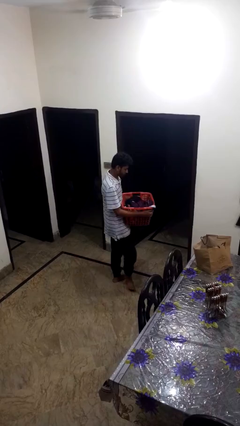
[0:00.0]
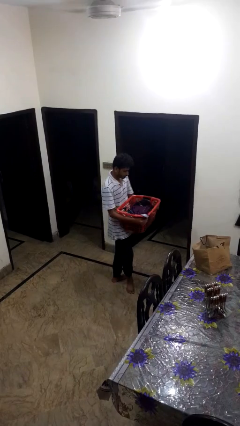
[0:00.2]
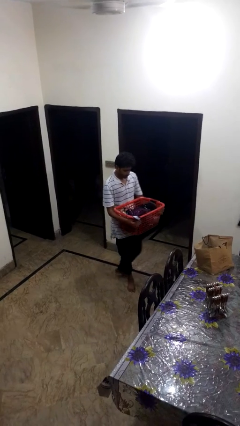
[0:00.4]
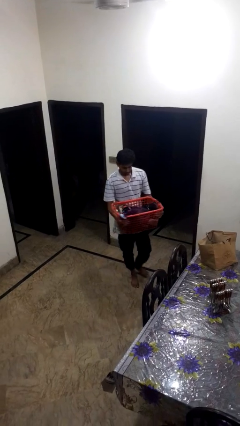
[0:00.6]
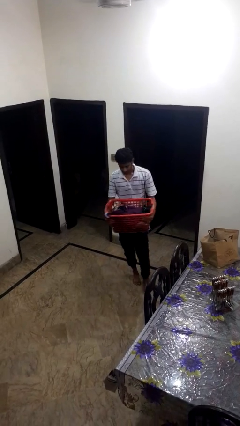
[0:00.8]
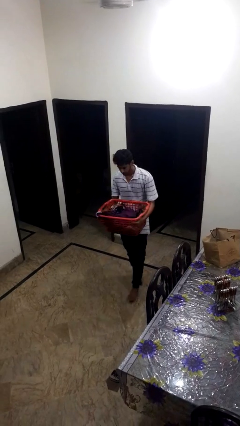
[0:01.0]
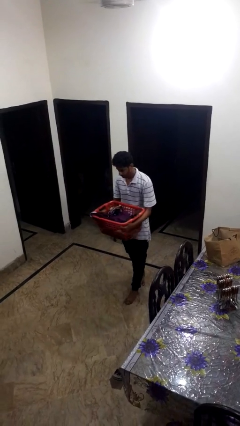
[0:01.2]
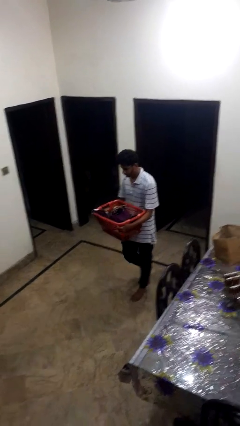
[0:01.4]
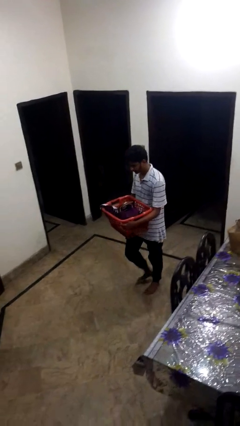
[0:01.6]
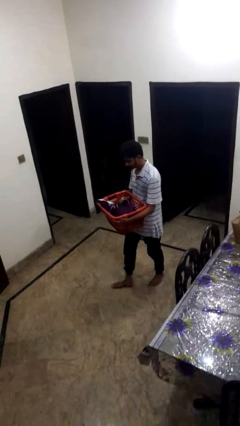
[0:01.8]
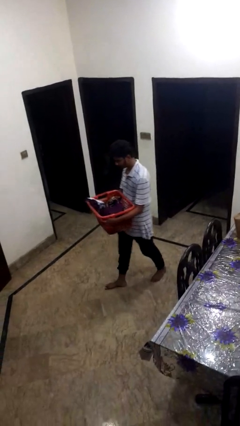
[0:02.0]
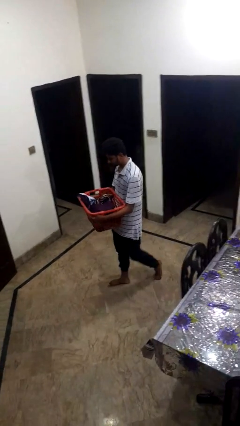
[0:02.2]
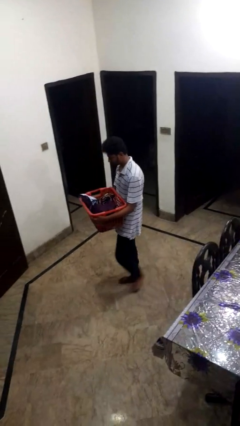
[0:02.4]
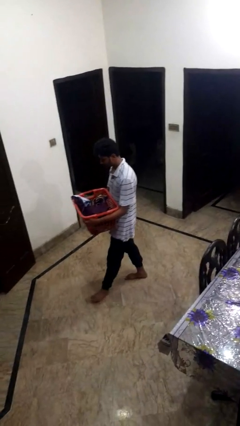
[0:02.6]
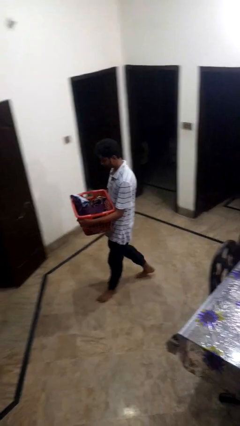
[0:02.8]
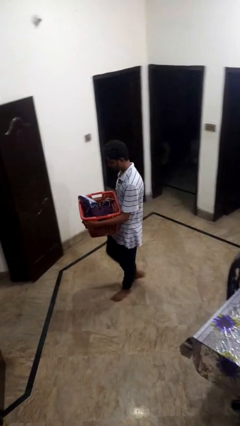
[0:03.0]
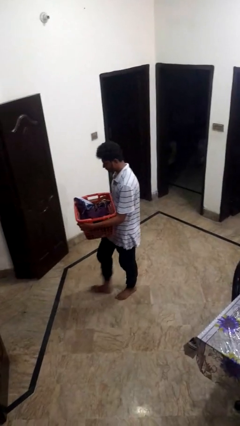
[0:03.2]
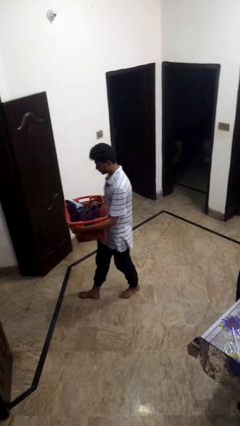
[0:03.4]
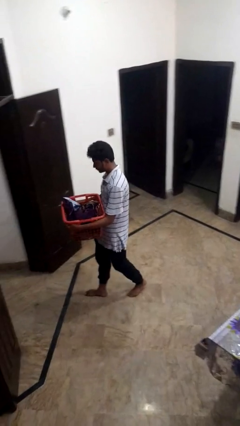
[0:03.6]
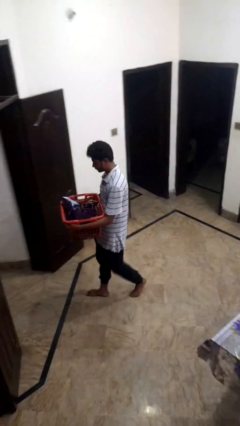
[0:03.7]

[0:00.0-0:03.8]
person carries laundry basket

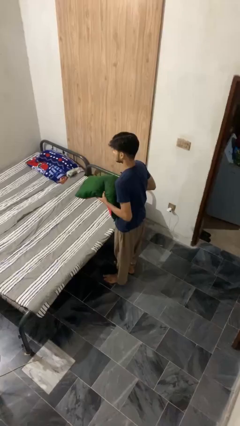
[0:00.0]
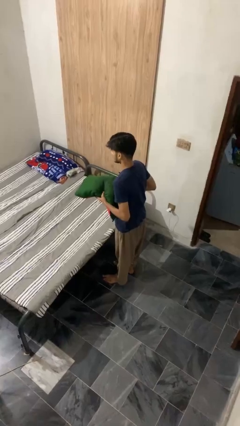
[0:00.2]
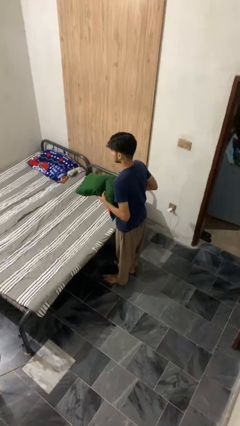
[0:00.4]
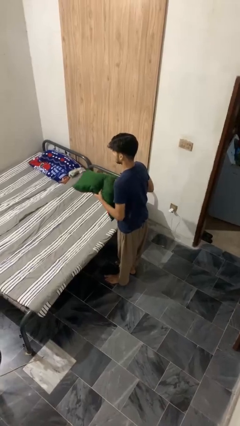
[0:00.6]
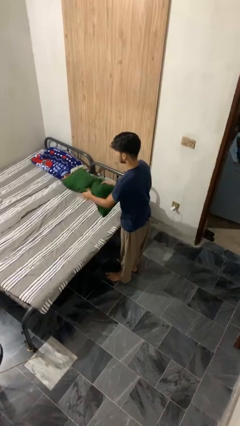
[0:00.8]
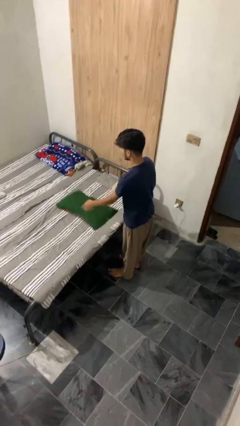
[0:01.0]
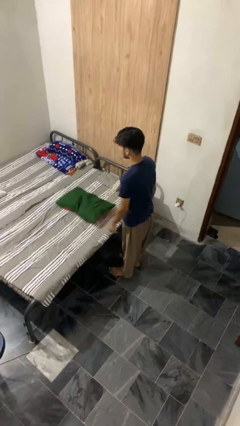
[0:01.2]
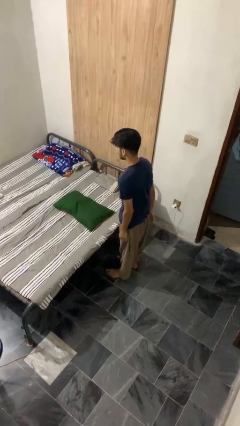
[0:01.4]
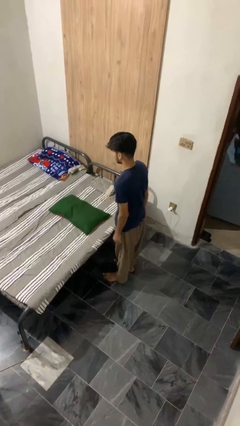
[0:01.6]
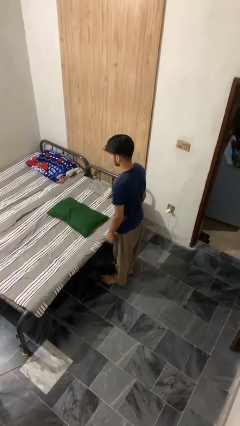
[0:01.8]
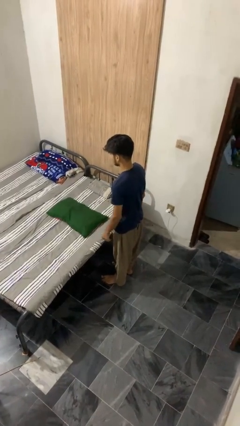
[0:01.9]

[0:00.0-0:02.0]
person puts down object on bed

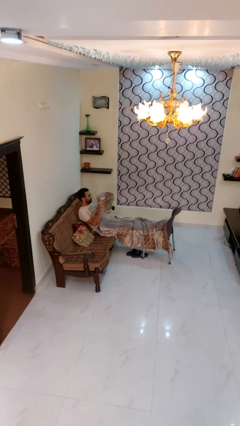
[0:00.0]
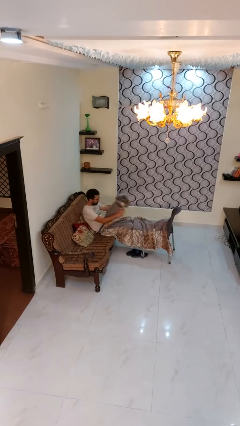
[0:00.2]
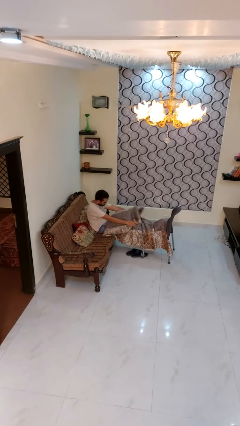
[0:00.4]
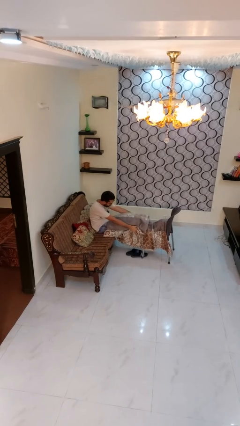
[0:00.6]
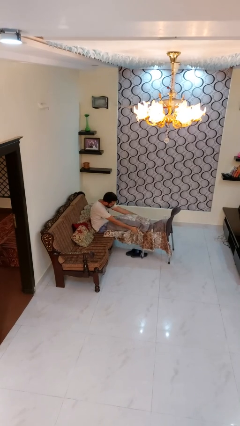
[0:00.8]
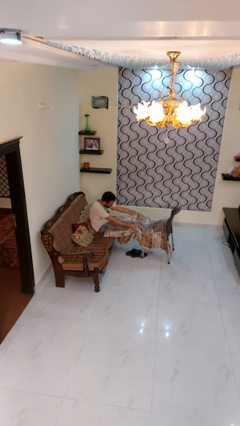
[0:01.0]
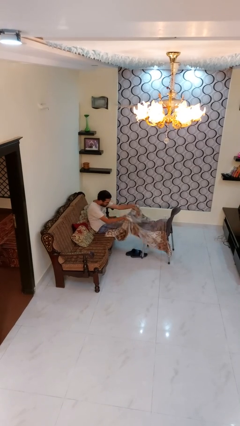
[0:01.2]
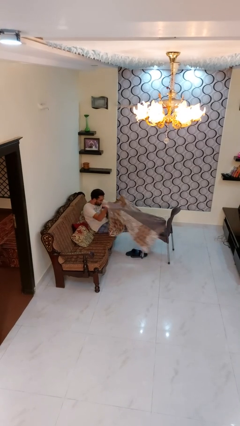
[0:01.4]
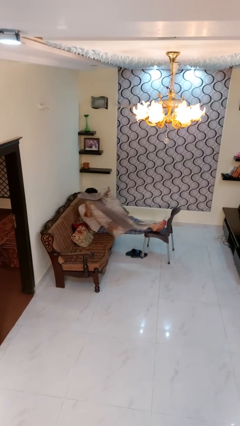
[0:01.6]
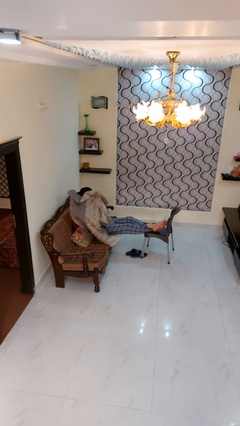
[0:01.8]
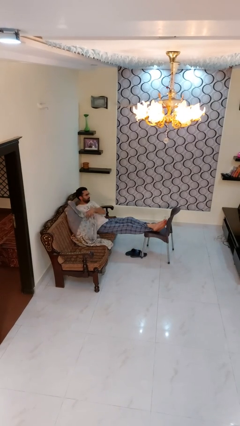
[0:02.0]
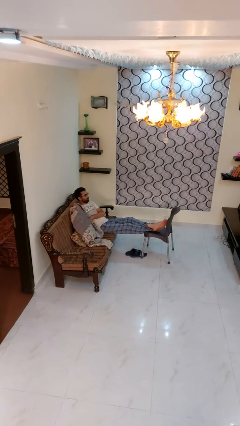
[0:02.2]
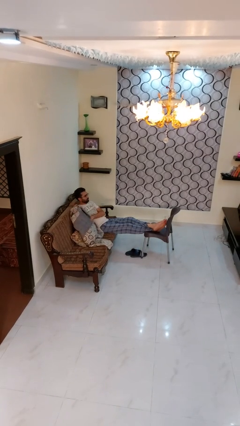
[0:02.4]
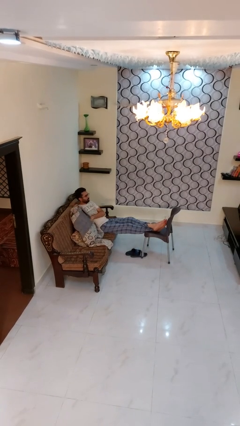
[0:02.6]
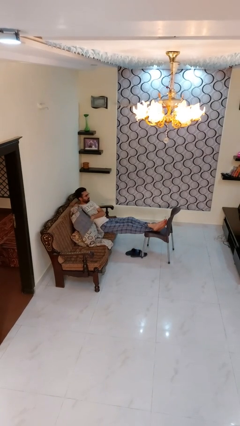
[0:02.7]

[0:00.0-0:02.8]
person uncovers with blanket

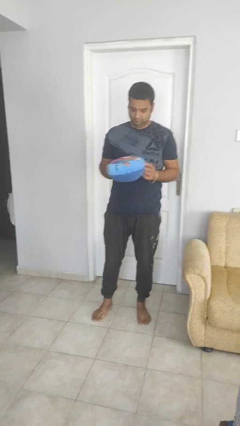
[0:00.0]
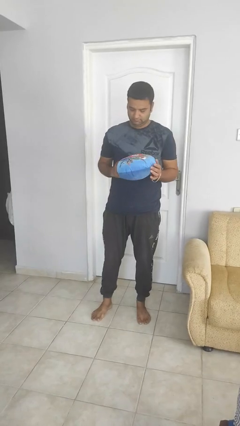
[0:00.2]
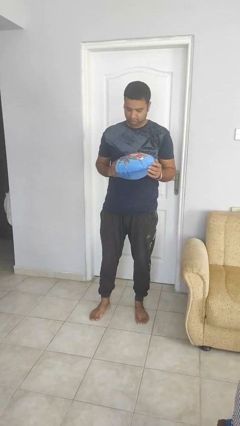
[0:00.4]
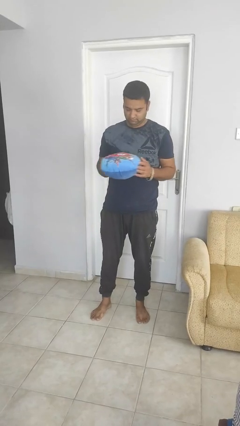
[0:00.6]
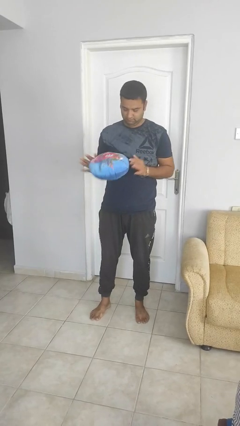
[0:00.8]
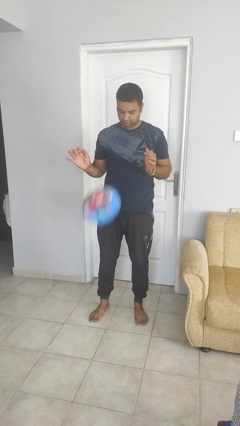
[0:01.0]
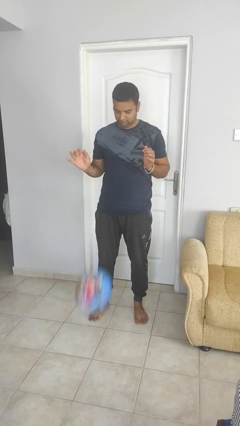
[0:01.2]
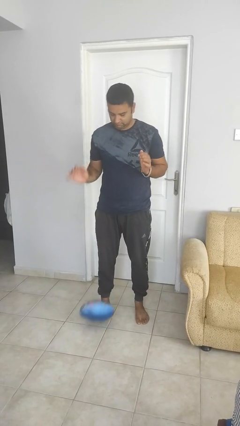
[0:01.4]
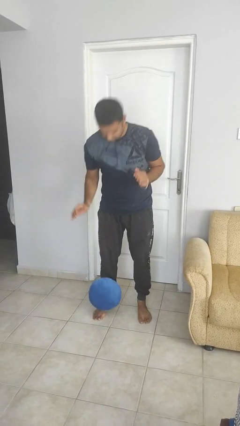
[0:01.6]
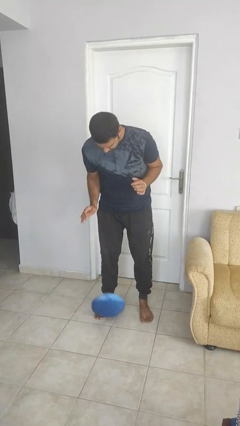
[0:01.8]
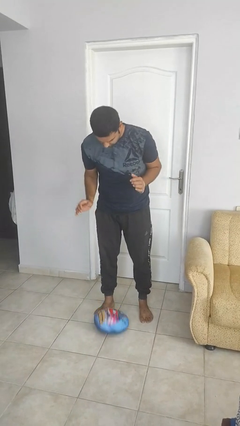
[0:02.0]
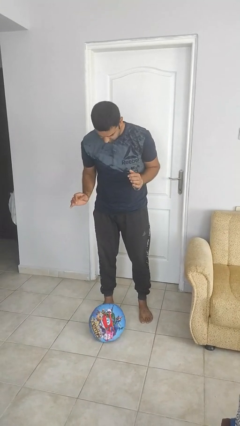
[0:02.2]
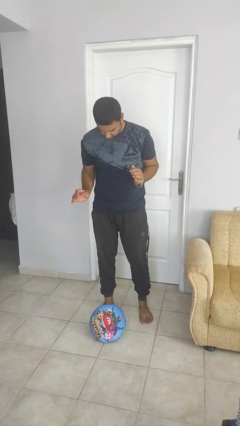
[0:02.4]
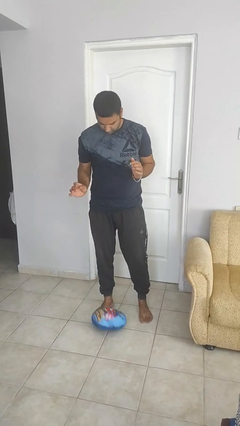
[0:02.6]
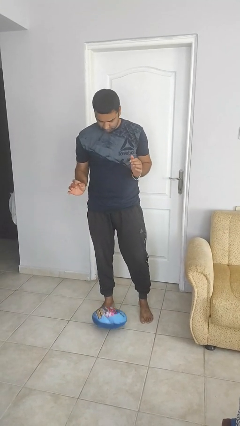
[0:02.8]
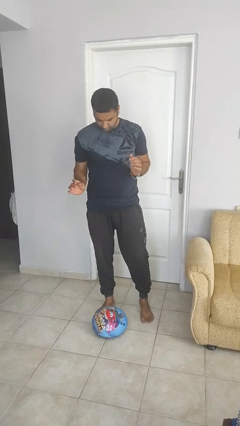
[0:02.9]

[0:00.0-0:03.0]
person drops object

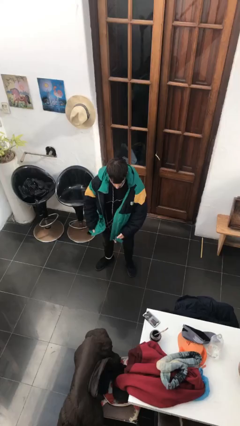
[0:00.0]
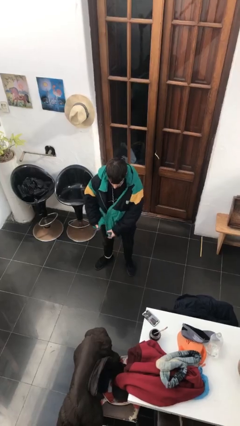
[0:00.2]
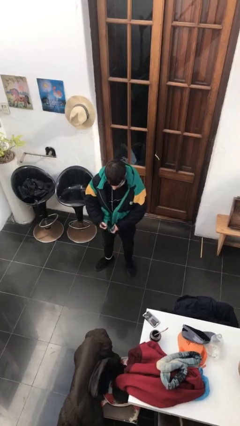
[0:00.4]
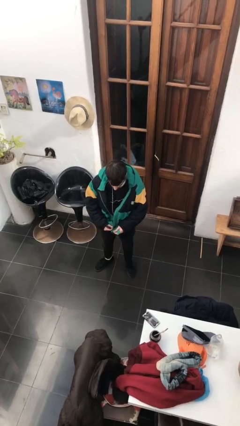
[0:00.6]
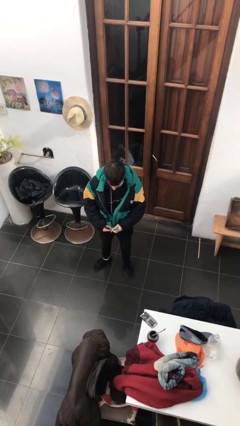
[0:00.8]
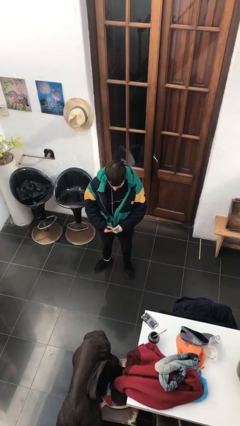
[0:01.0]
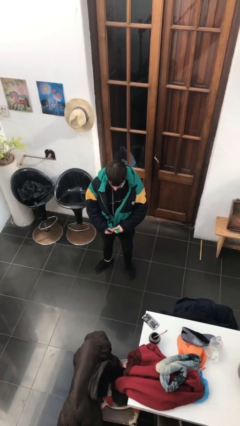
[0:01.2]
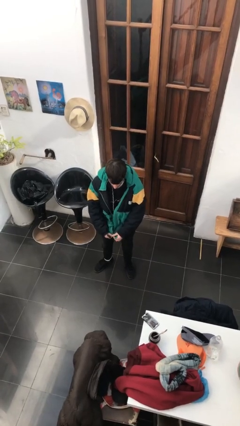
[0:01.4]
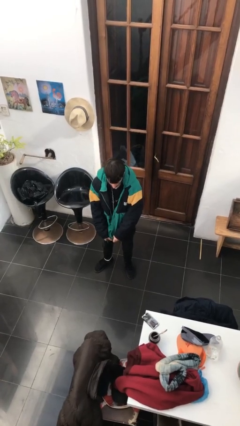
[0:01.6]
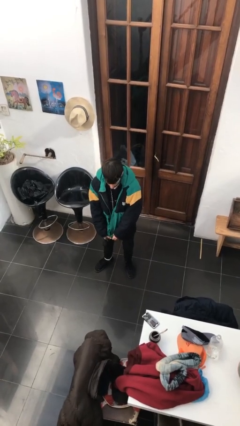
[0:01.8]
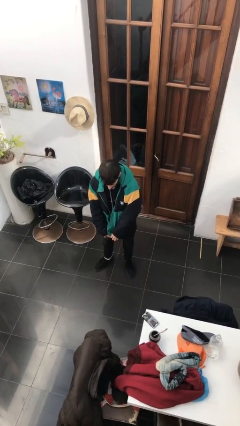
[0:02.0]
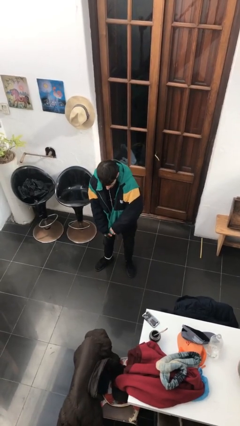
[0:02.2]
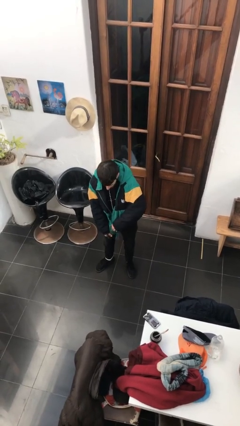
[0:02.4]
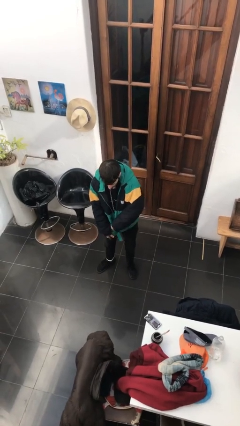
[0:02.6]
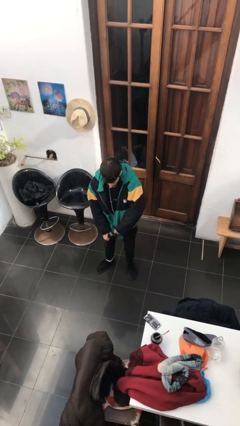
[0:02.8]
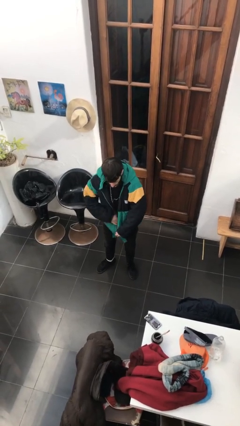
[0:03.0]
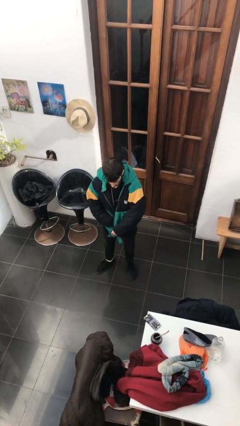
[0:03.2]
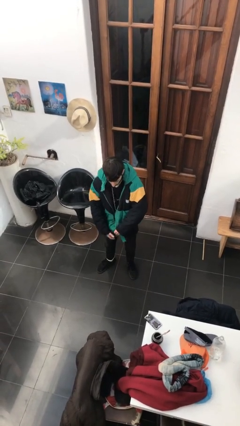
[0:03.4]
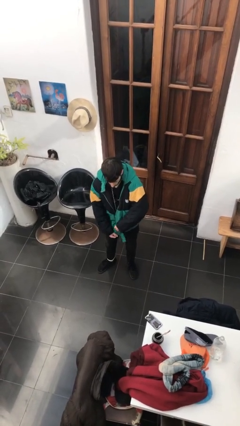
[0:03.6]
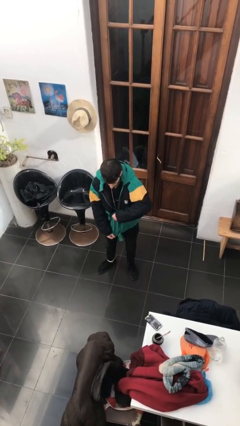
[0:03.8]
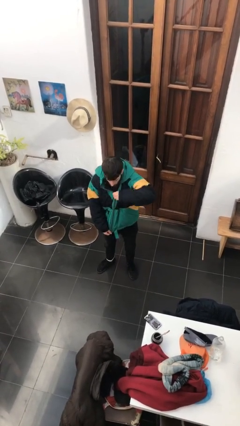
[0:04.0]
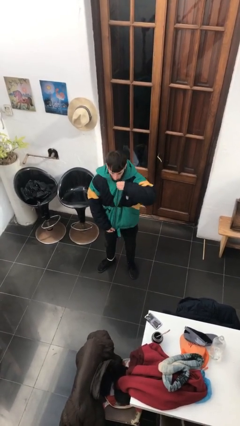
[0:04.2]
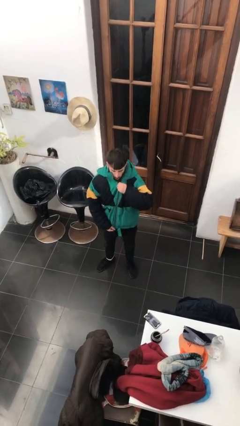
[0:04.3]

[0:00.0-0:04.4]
person zips up jacket

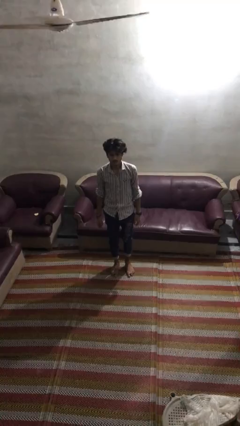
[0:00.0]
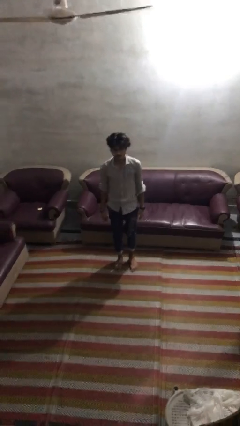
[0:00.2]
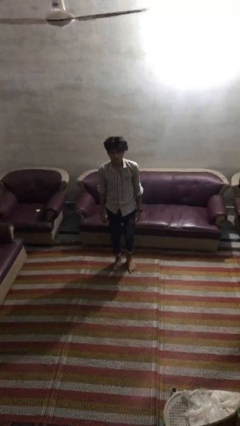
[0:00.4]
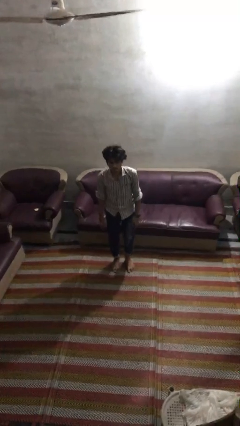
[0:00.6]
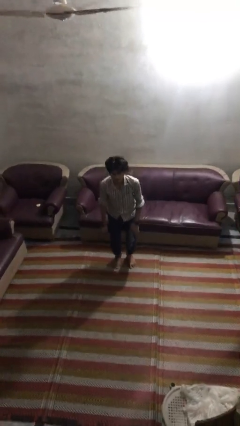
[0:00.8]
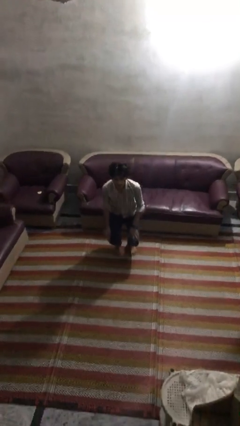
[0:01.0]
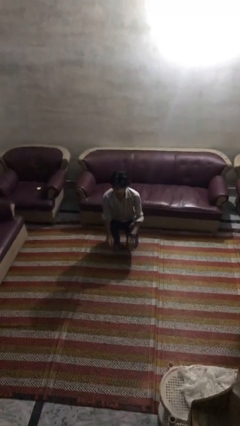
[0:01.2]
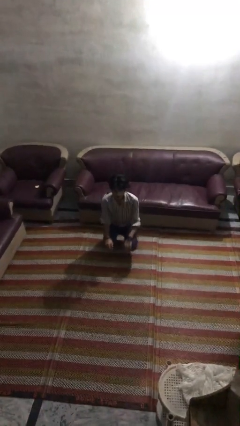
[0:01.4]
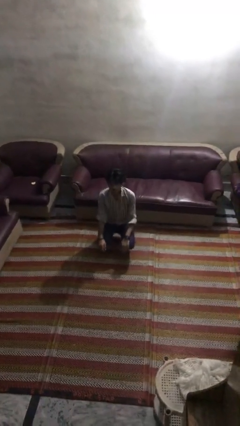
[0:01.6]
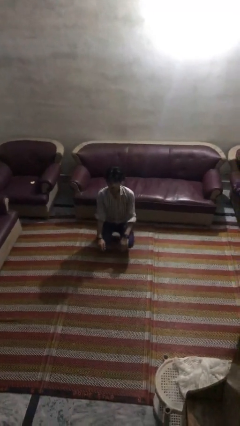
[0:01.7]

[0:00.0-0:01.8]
person squats
